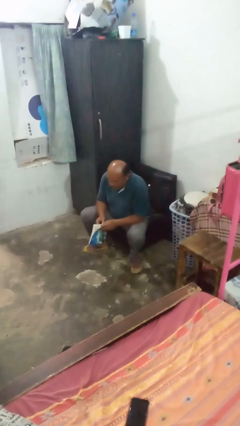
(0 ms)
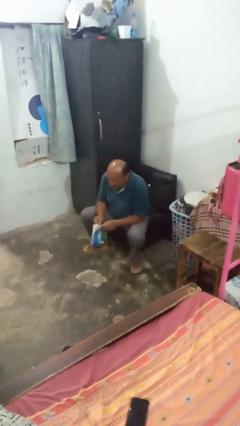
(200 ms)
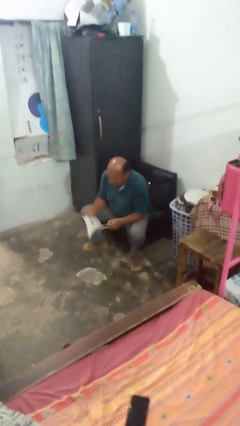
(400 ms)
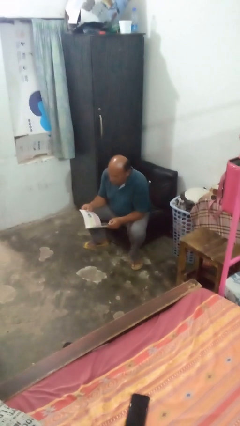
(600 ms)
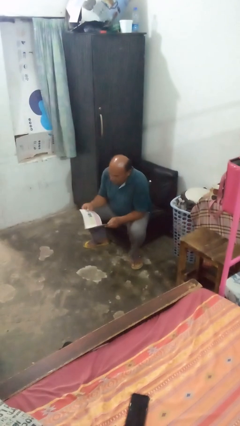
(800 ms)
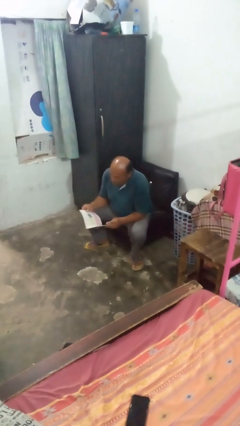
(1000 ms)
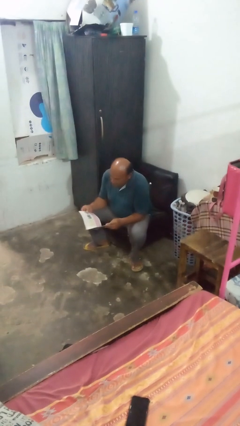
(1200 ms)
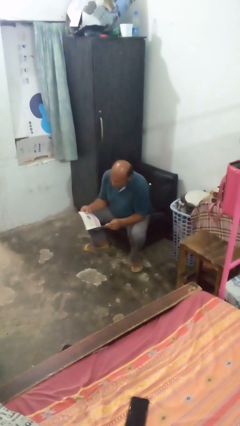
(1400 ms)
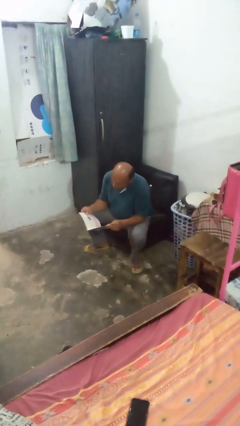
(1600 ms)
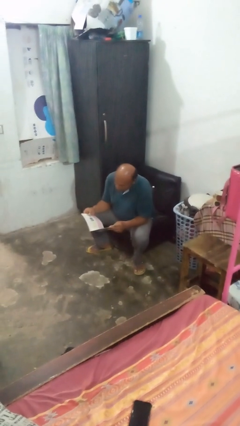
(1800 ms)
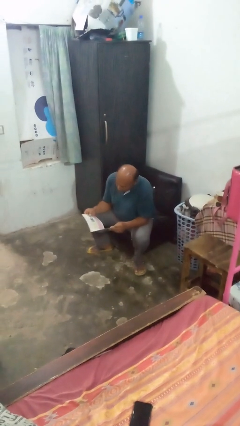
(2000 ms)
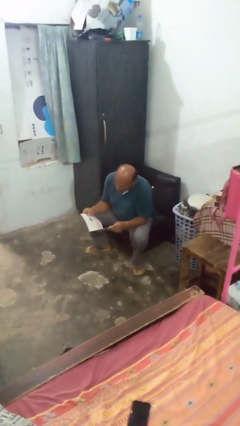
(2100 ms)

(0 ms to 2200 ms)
person reads book

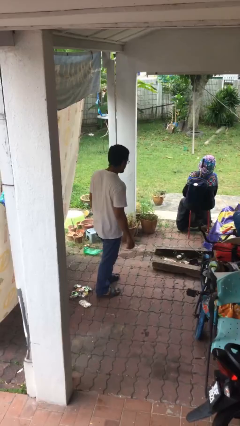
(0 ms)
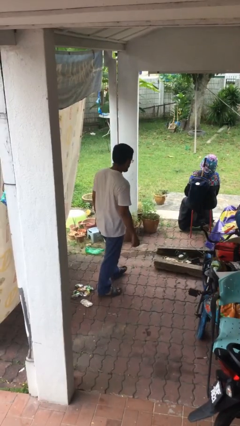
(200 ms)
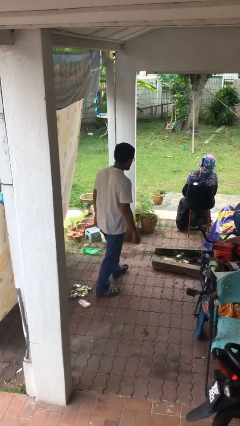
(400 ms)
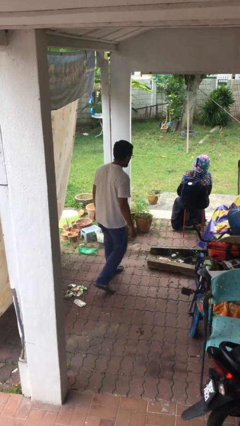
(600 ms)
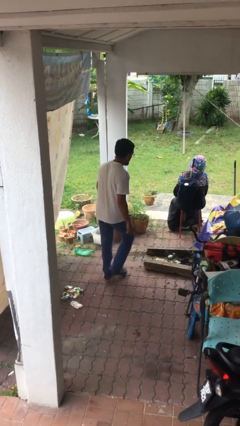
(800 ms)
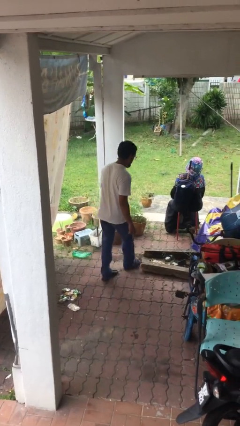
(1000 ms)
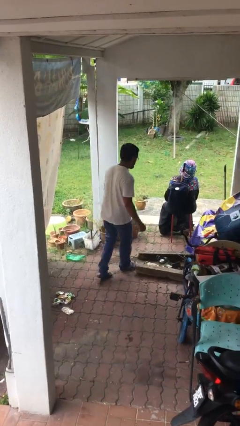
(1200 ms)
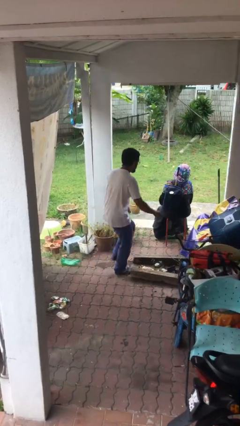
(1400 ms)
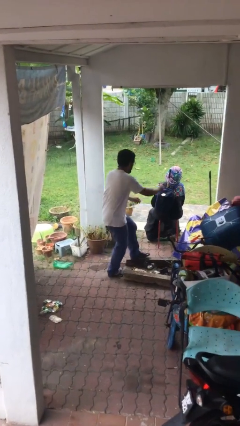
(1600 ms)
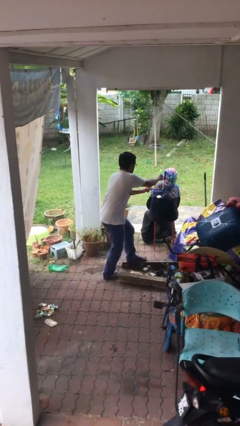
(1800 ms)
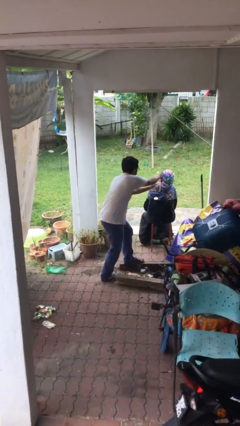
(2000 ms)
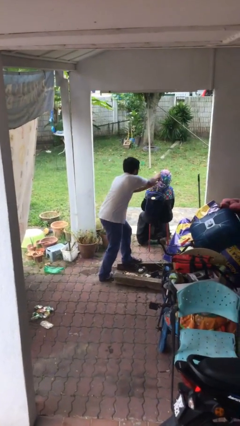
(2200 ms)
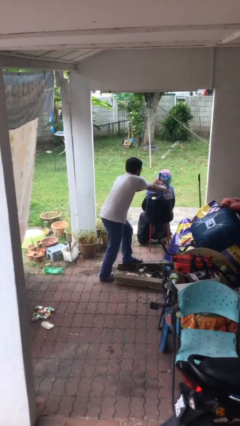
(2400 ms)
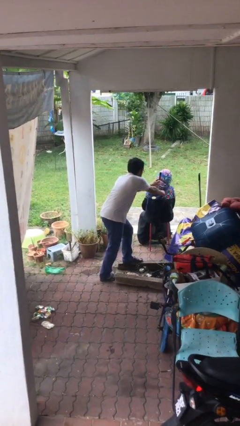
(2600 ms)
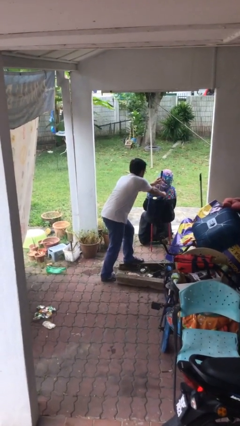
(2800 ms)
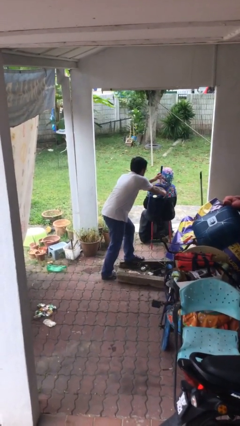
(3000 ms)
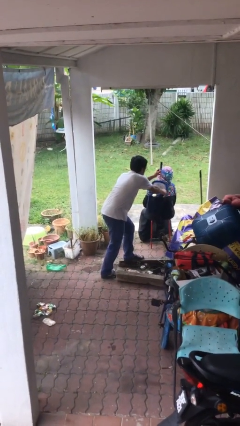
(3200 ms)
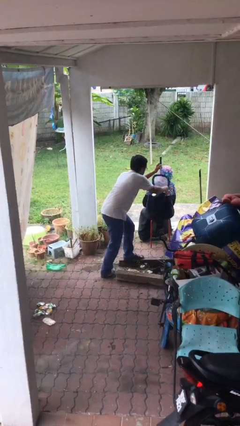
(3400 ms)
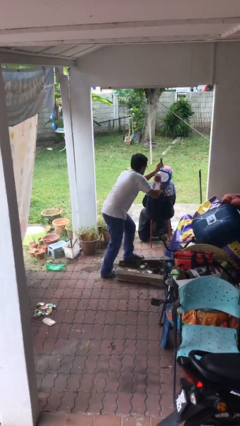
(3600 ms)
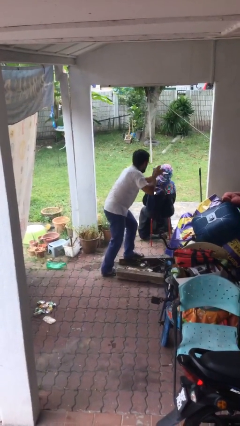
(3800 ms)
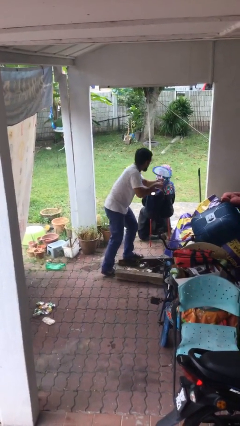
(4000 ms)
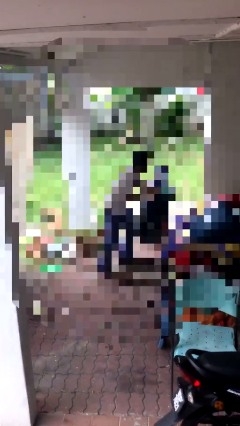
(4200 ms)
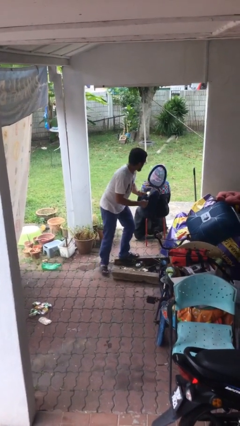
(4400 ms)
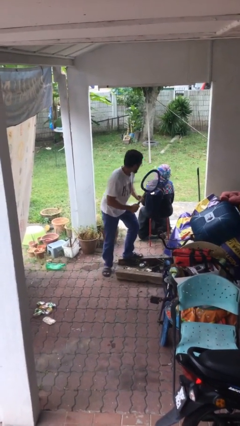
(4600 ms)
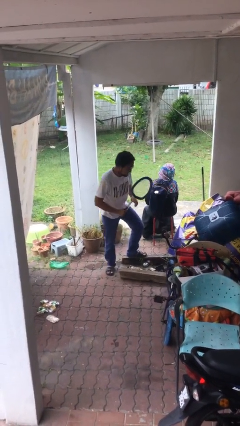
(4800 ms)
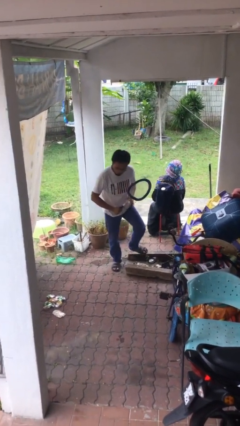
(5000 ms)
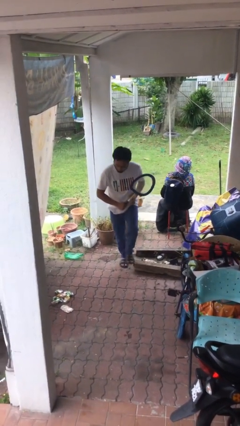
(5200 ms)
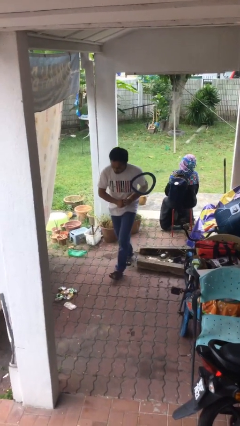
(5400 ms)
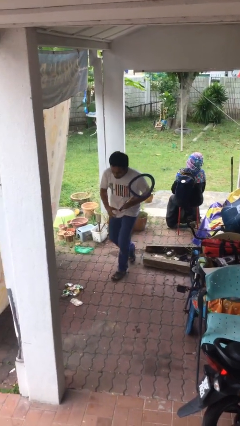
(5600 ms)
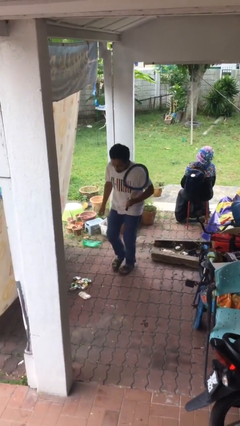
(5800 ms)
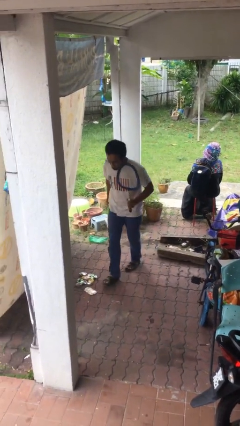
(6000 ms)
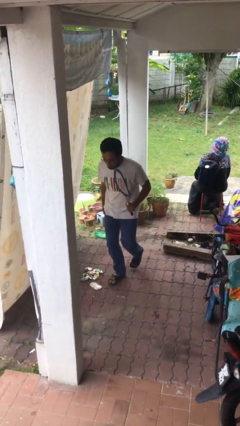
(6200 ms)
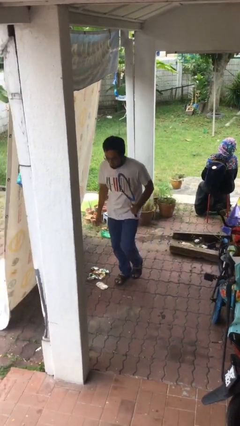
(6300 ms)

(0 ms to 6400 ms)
person steals object from person

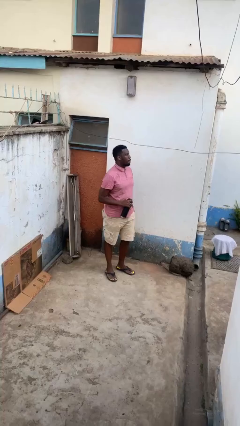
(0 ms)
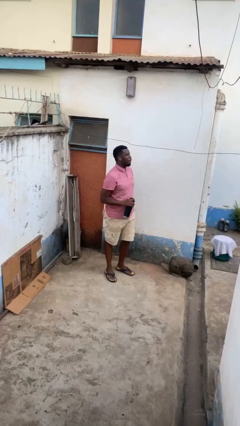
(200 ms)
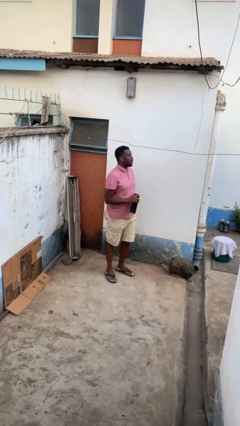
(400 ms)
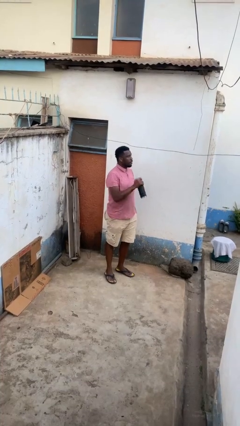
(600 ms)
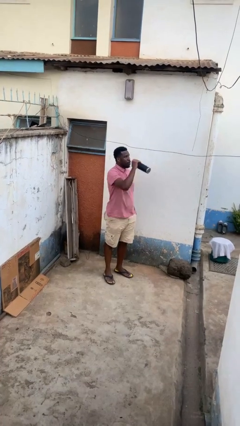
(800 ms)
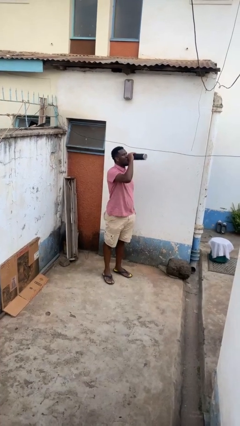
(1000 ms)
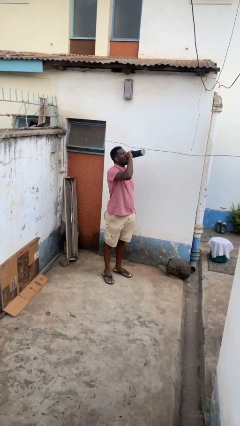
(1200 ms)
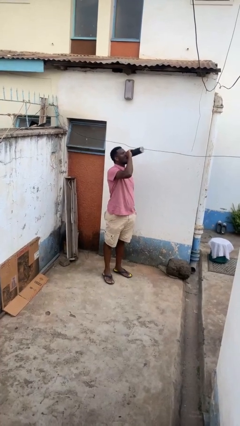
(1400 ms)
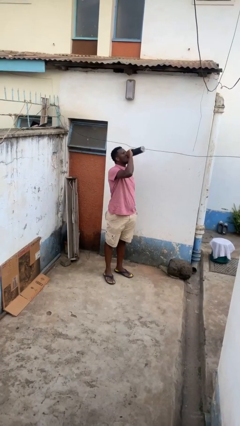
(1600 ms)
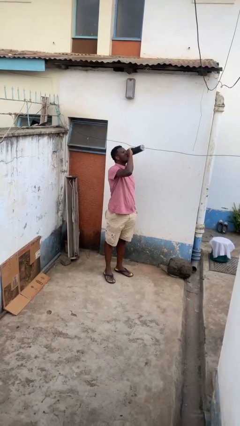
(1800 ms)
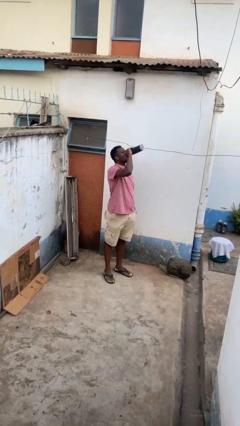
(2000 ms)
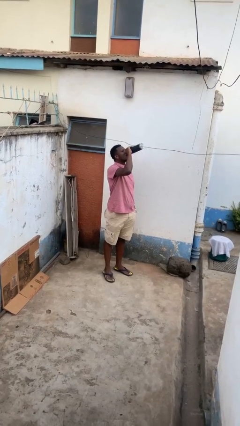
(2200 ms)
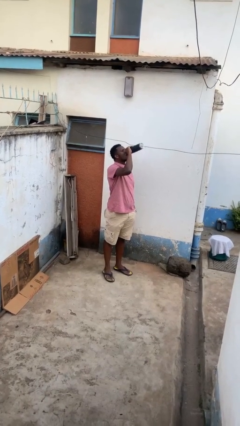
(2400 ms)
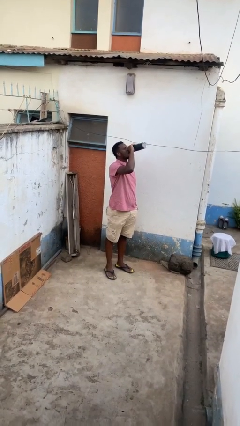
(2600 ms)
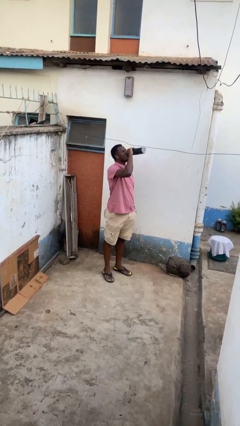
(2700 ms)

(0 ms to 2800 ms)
person drinks from bottle

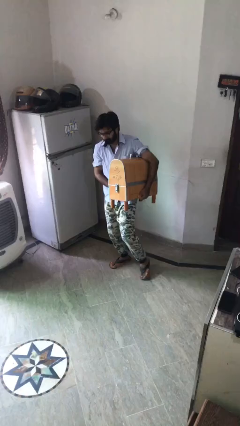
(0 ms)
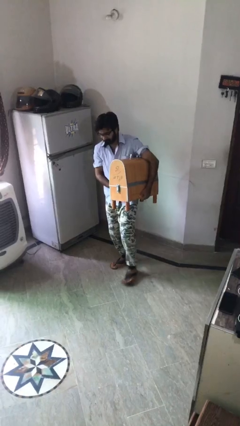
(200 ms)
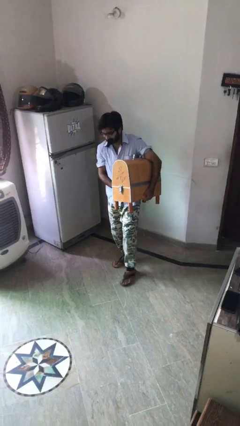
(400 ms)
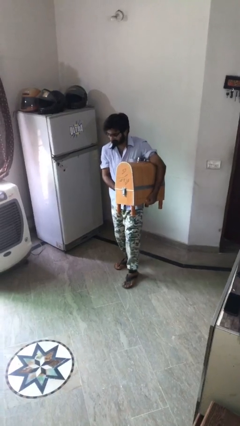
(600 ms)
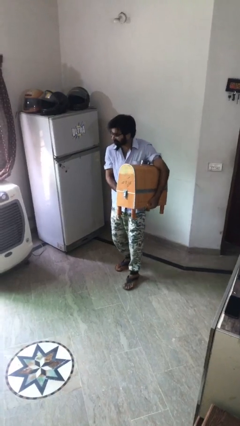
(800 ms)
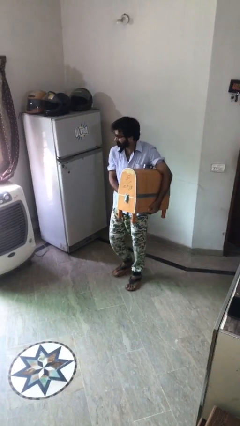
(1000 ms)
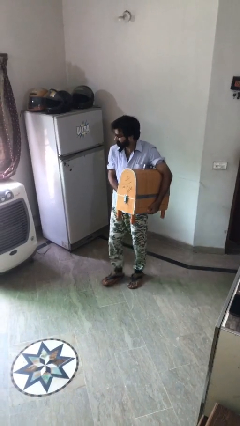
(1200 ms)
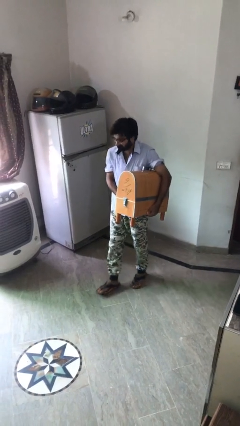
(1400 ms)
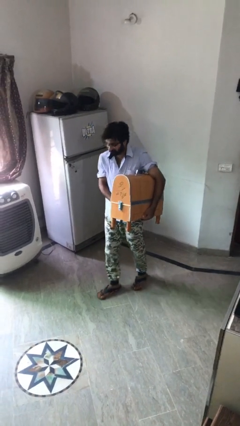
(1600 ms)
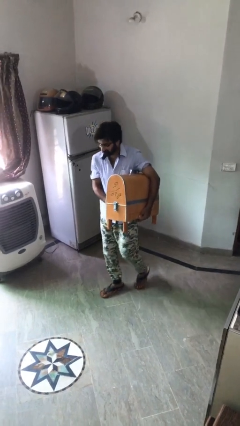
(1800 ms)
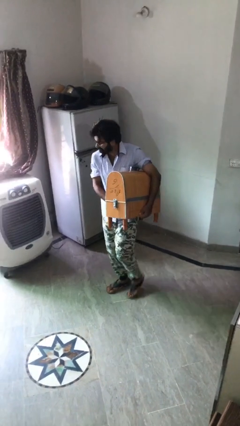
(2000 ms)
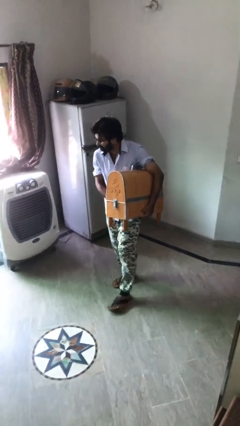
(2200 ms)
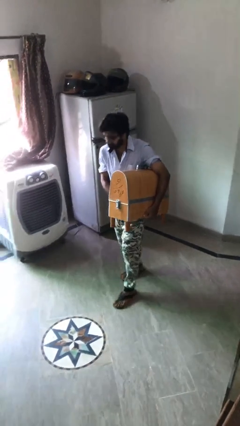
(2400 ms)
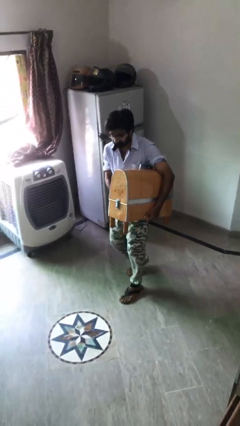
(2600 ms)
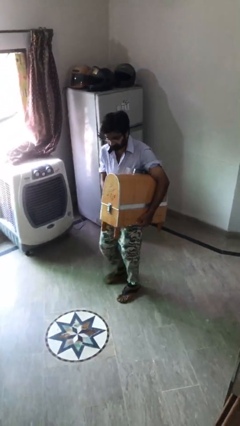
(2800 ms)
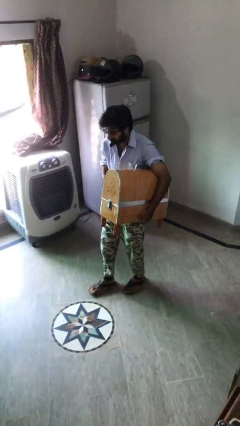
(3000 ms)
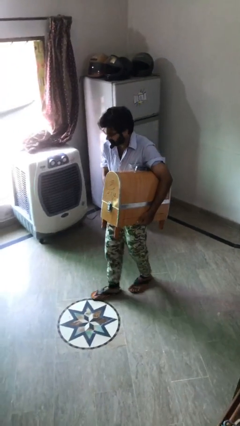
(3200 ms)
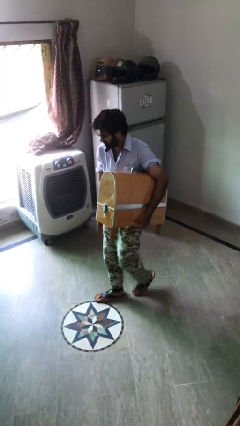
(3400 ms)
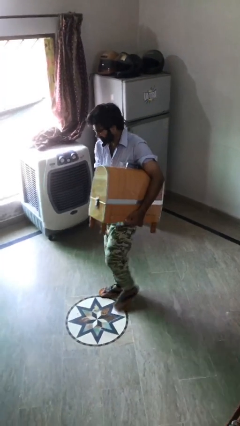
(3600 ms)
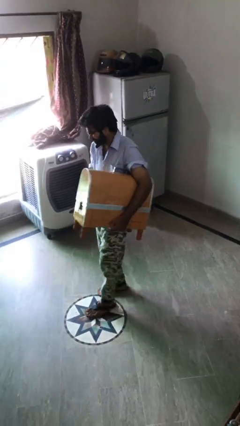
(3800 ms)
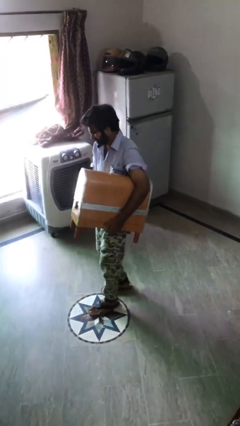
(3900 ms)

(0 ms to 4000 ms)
person carries heavy object

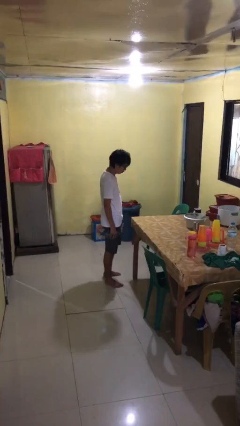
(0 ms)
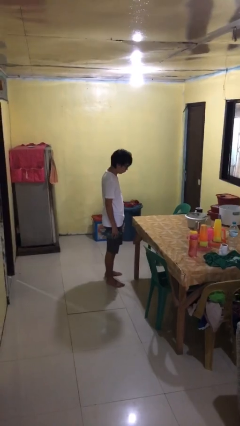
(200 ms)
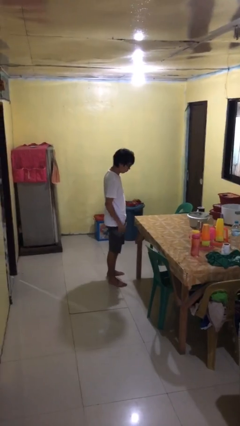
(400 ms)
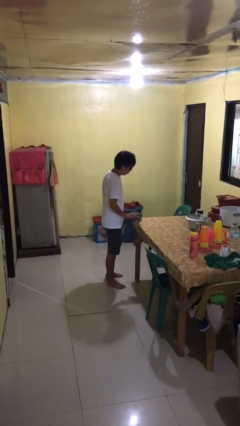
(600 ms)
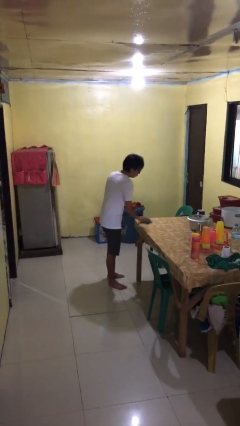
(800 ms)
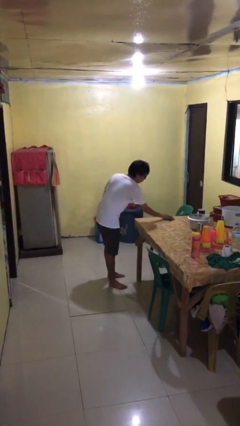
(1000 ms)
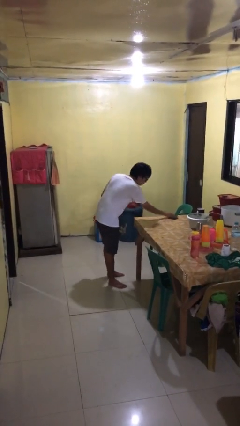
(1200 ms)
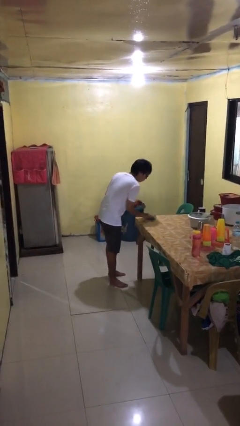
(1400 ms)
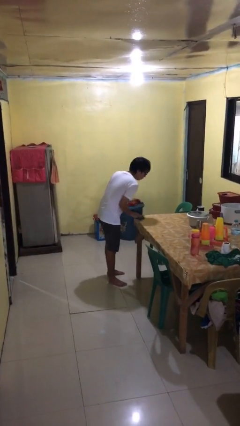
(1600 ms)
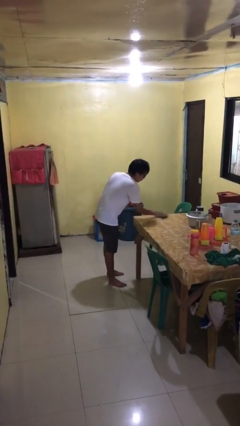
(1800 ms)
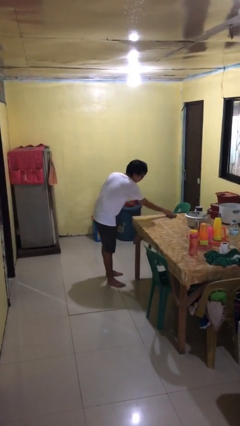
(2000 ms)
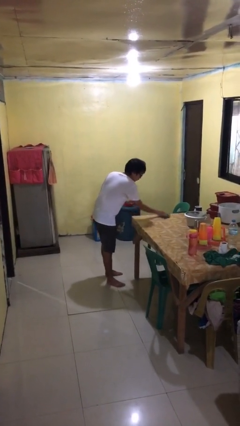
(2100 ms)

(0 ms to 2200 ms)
person cleans table with rag
